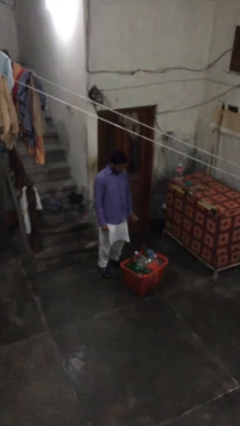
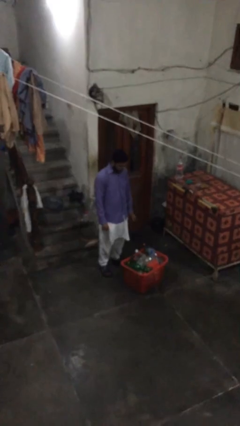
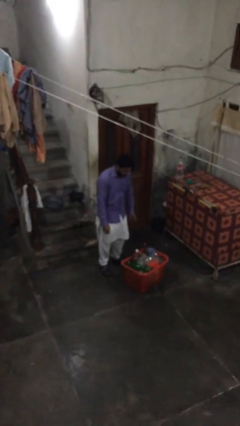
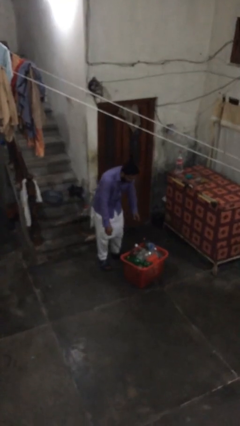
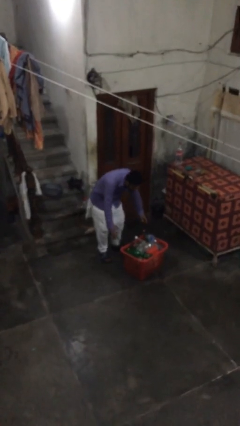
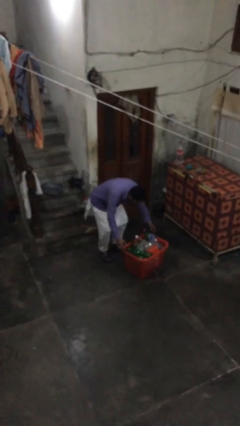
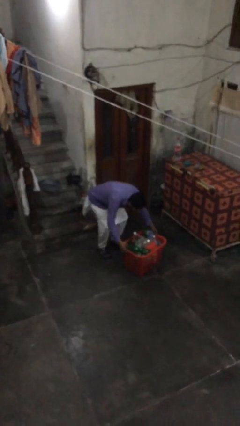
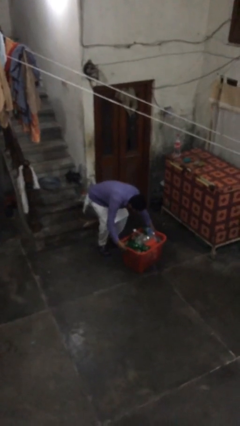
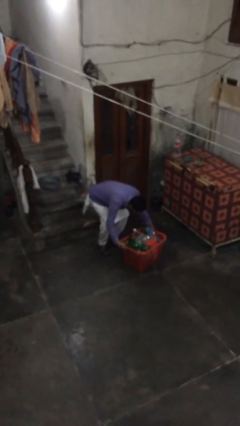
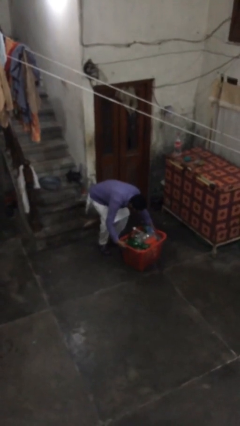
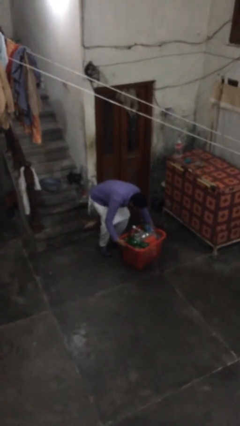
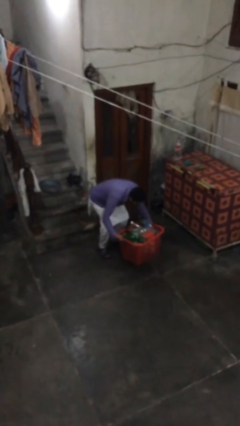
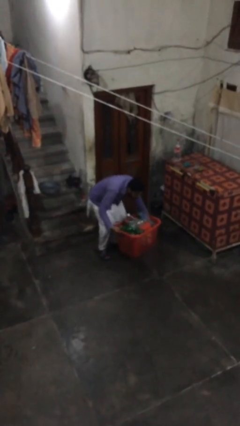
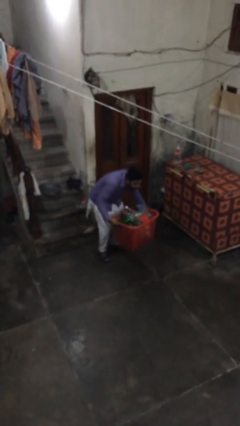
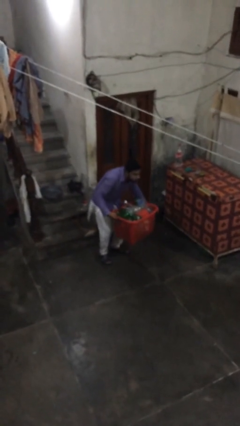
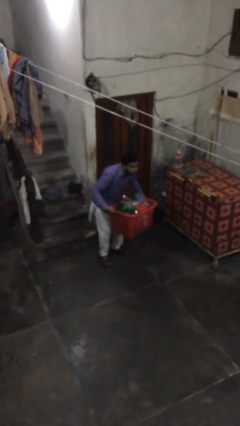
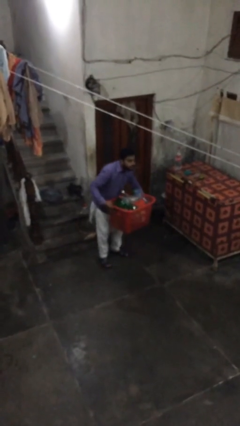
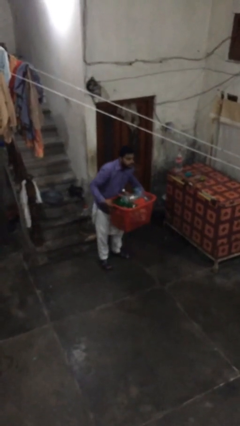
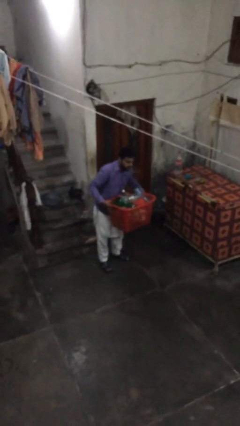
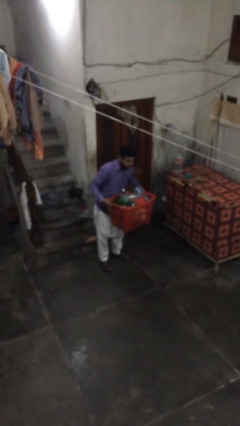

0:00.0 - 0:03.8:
person picks up object from floor

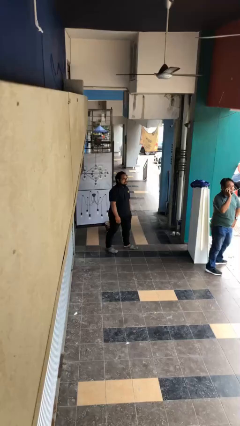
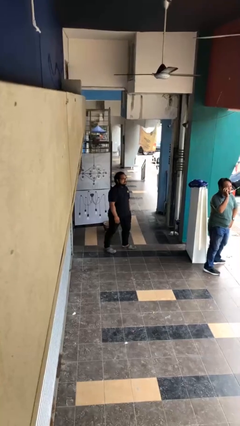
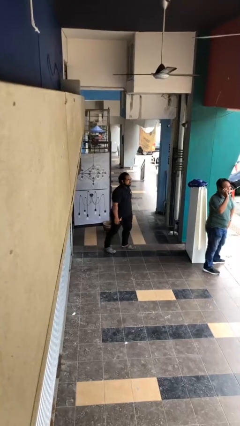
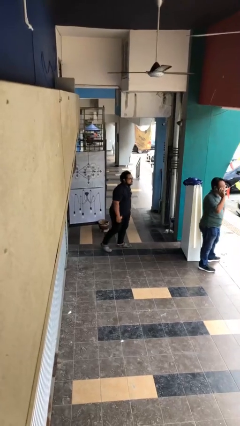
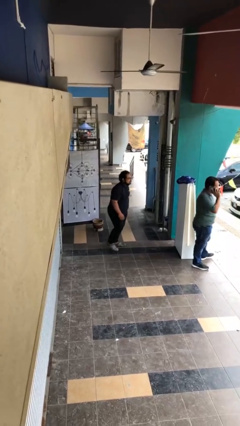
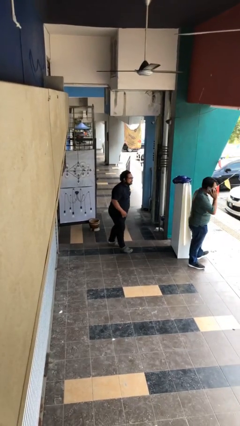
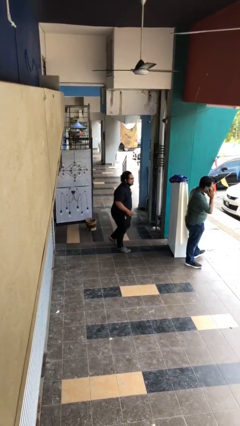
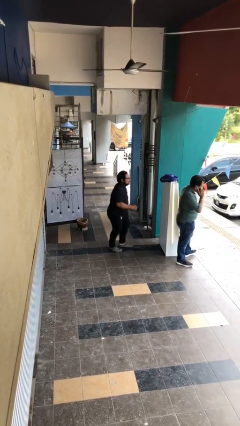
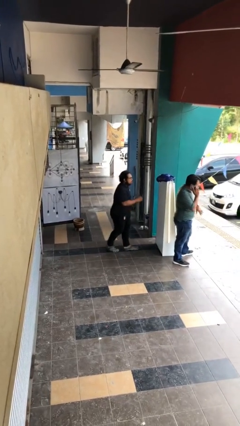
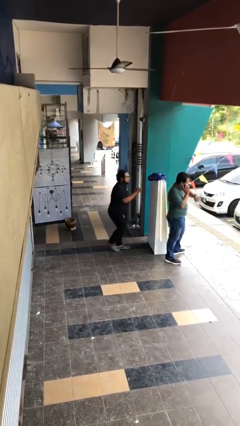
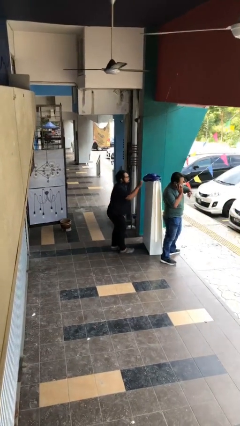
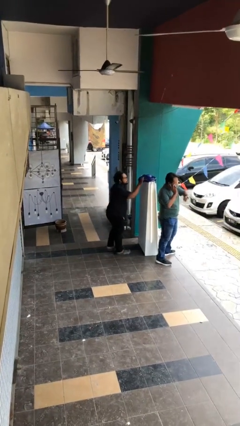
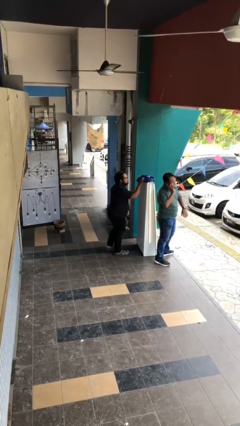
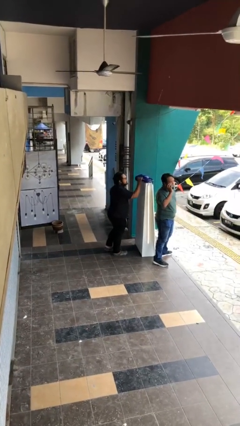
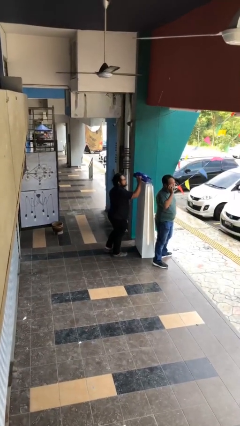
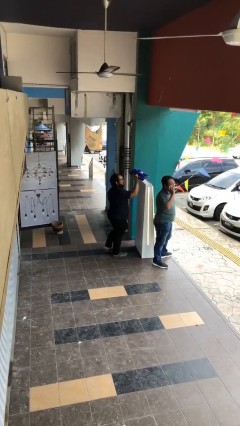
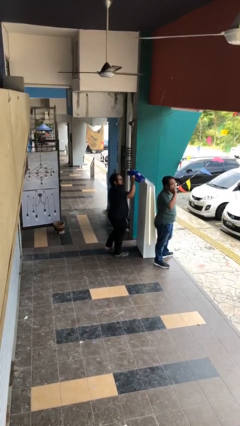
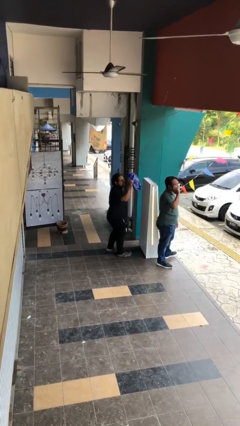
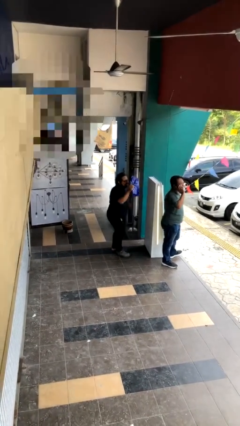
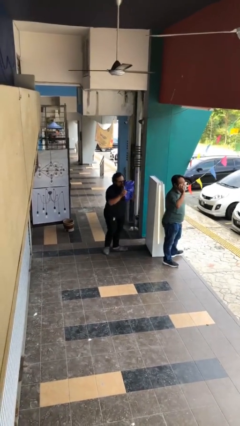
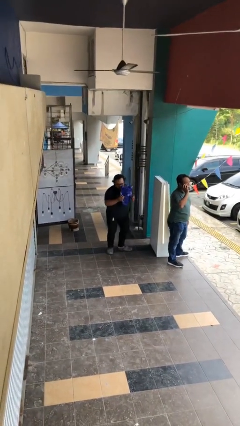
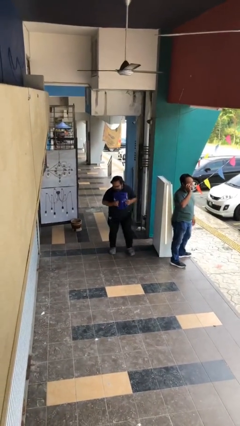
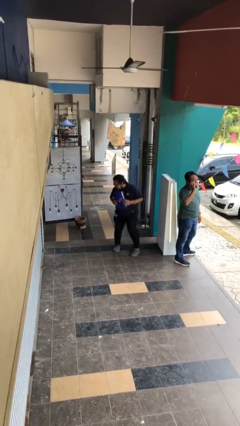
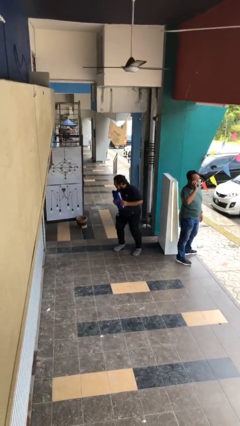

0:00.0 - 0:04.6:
person steals object from person

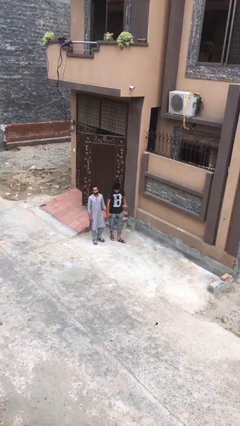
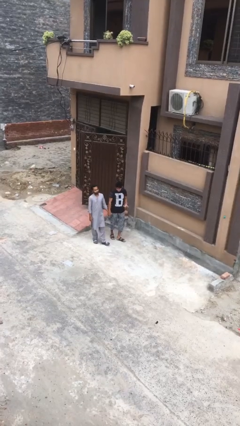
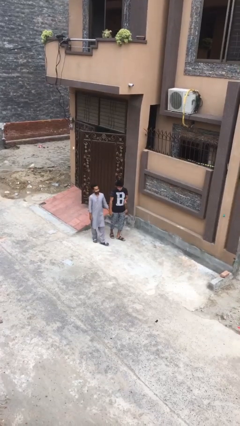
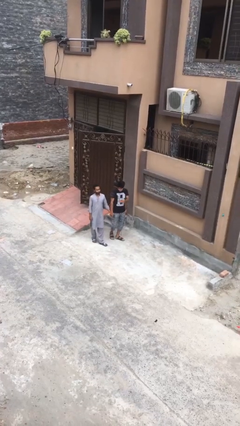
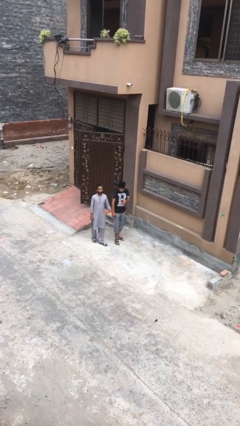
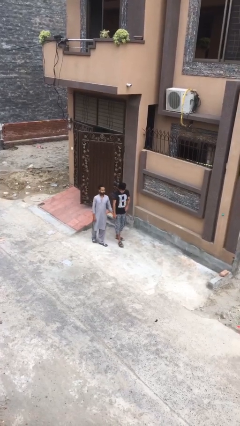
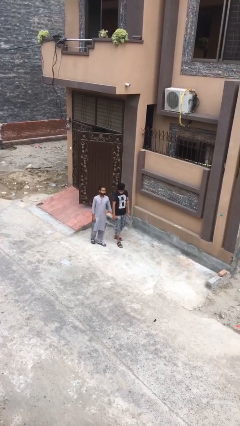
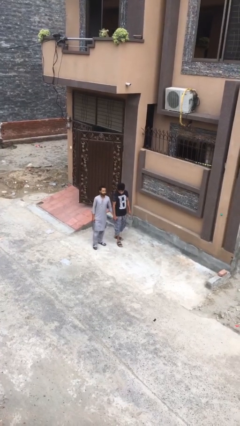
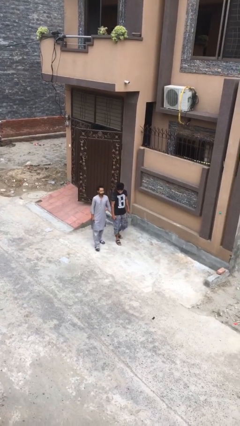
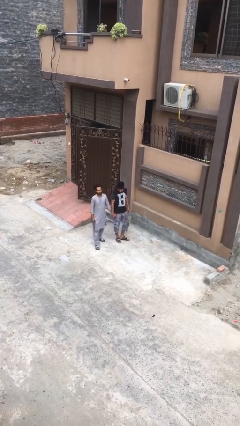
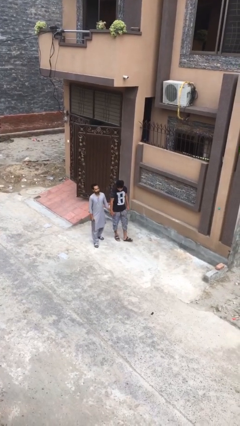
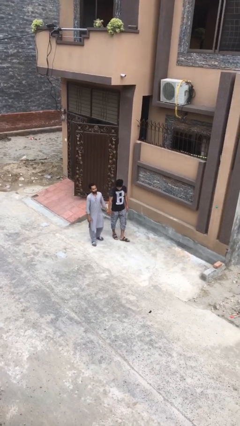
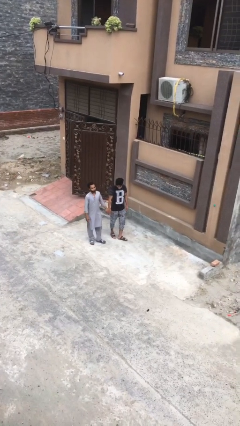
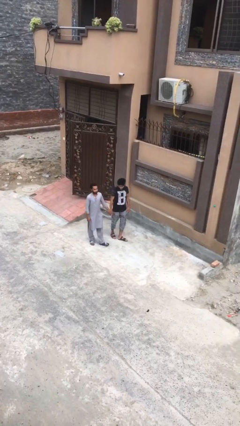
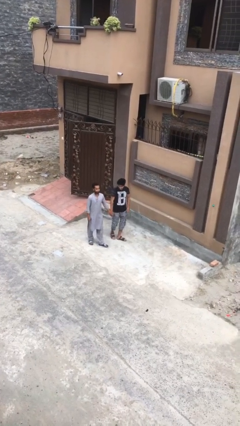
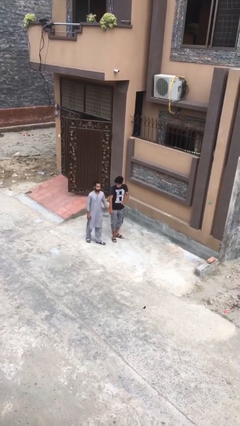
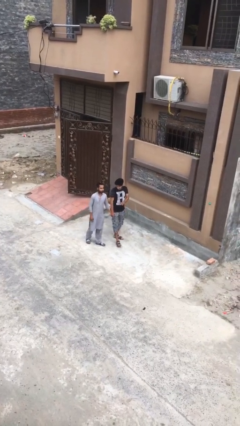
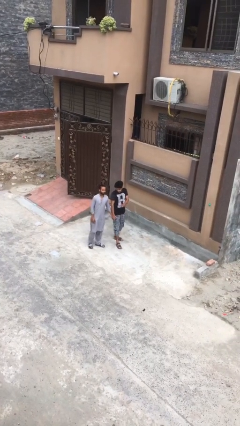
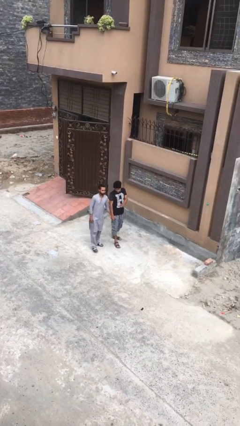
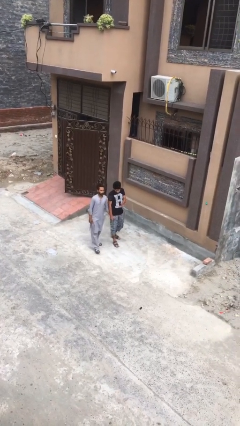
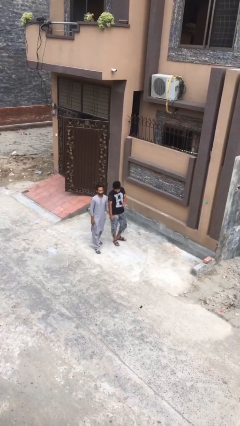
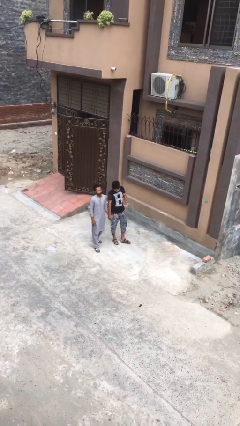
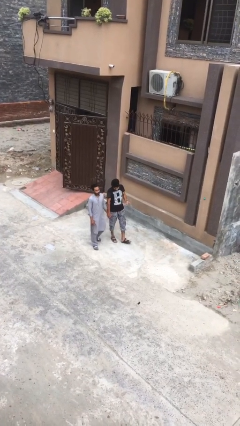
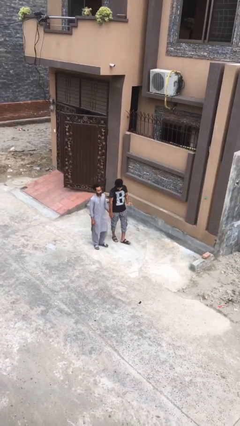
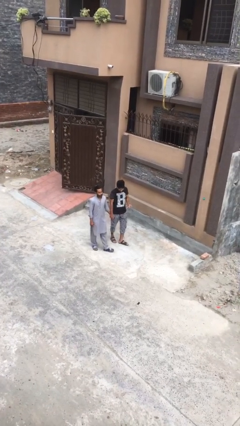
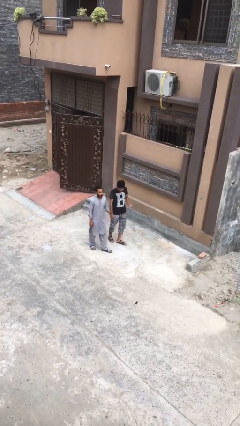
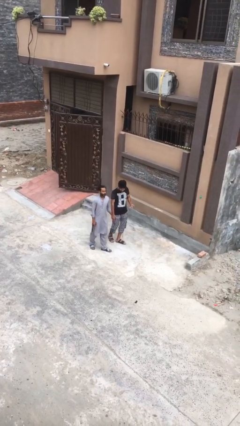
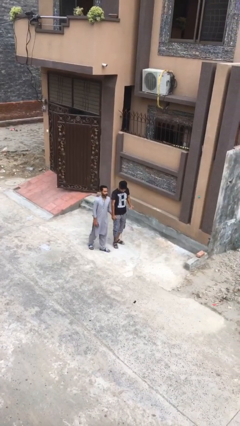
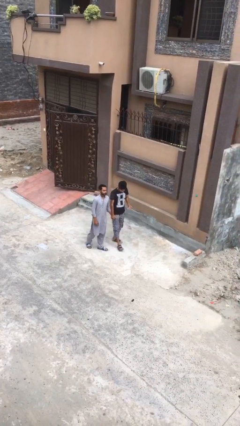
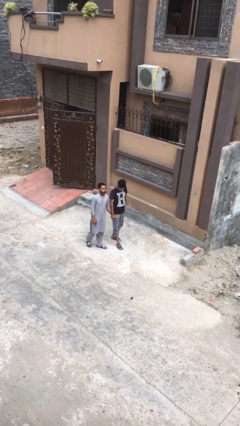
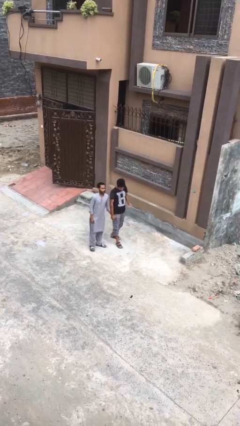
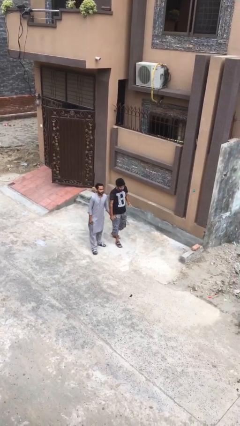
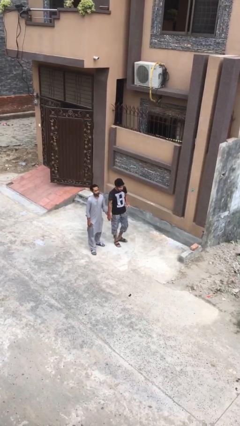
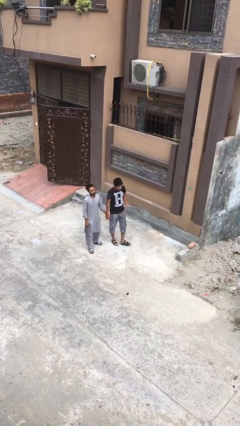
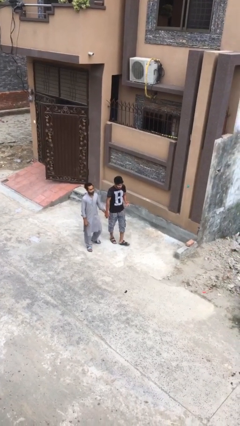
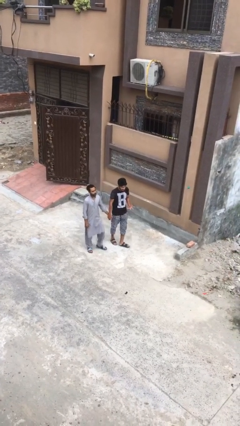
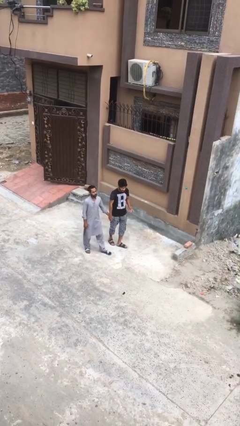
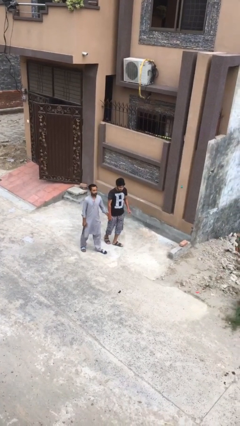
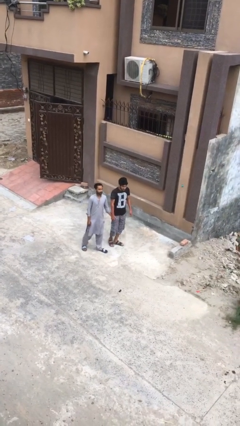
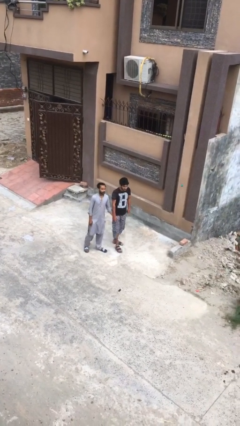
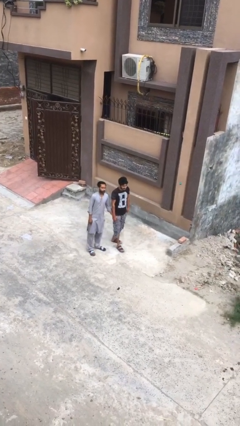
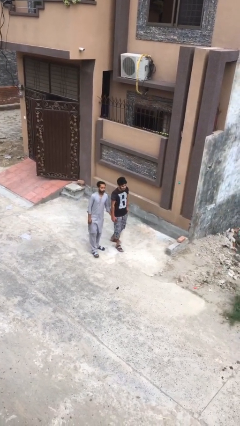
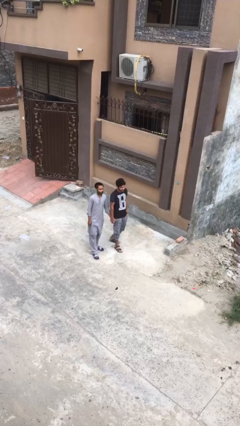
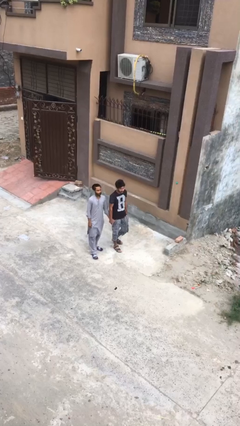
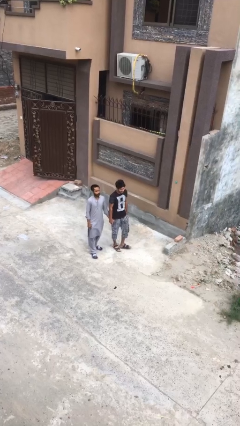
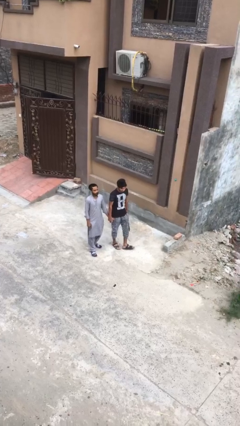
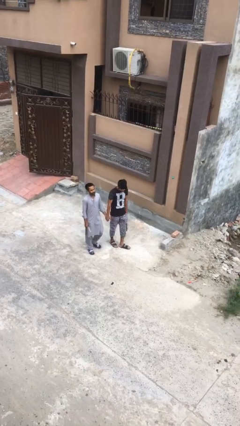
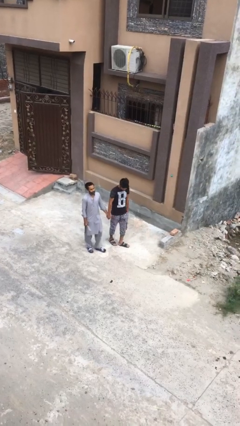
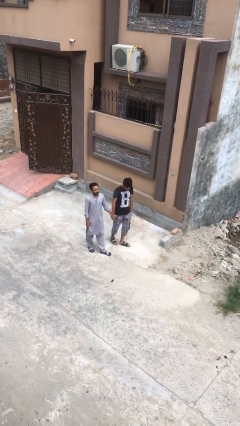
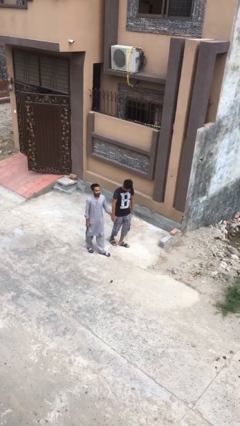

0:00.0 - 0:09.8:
person holds hand
